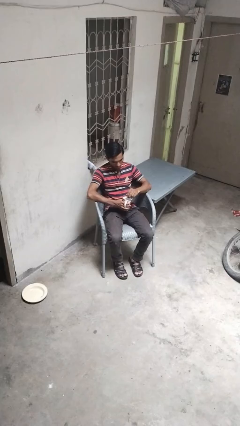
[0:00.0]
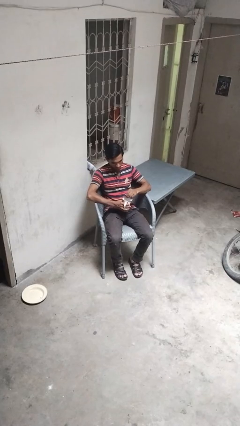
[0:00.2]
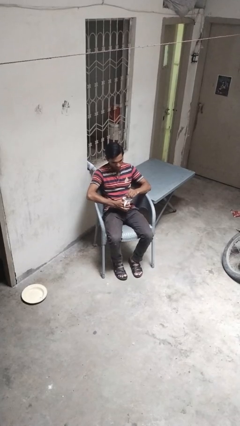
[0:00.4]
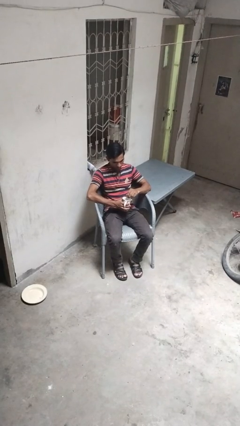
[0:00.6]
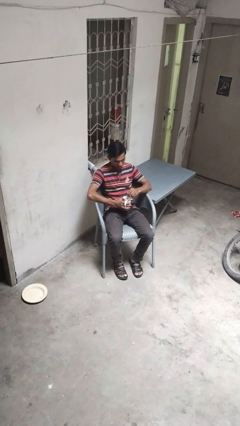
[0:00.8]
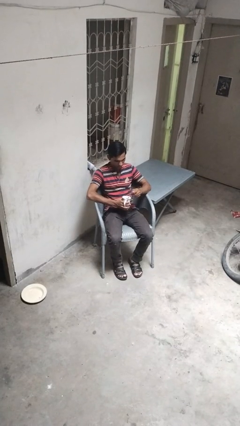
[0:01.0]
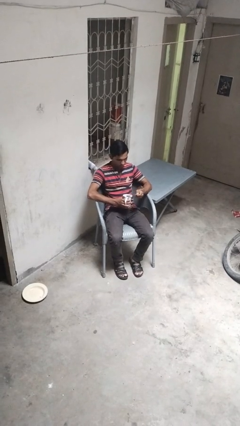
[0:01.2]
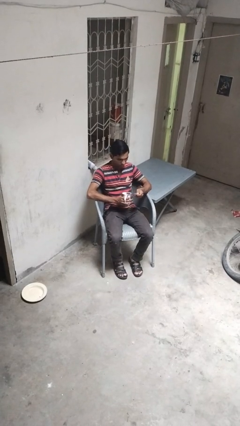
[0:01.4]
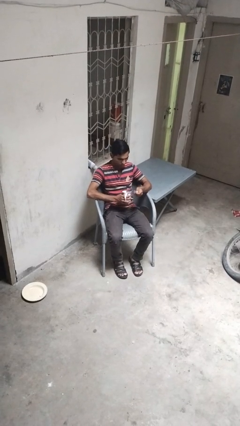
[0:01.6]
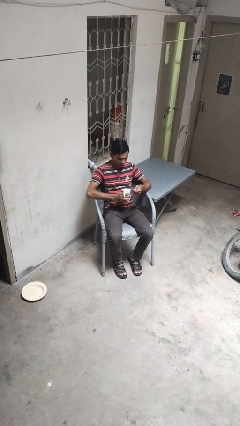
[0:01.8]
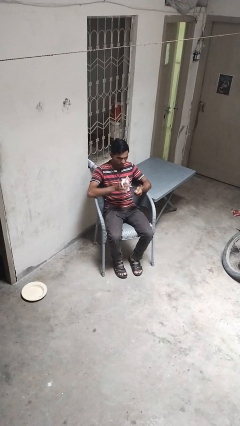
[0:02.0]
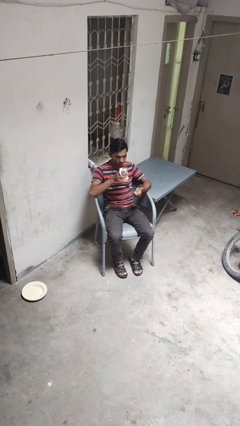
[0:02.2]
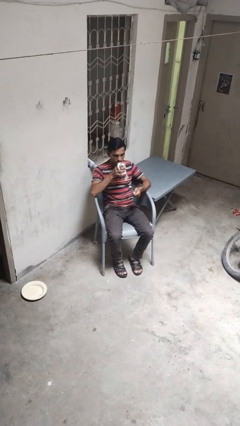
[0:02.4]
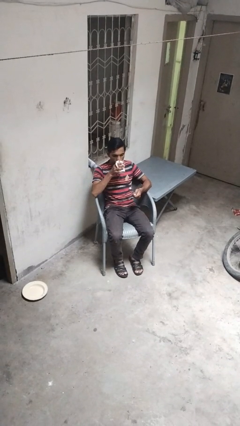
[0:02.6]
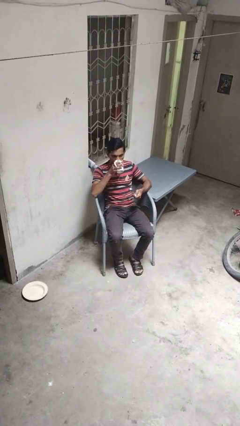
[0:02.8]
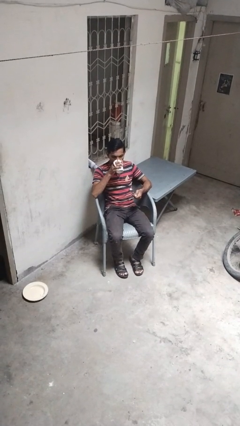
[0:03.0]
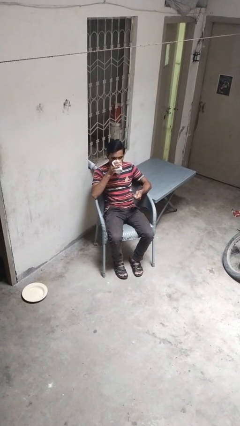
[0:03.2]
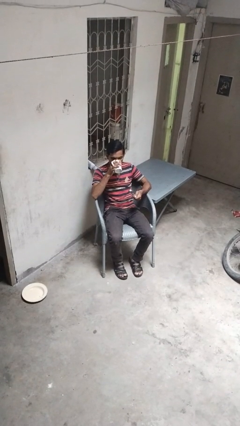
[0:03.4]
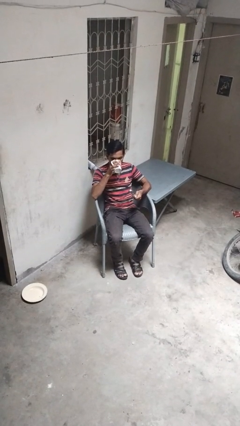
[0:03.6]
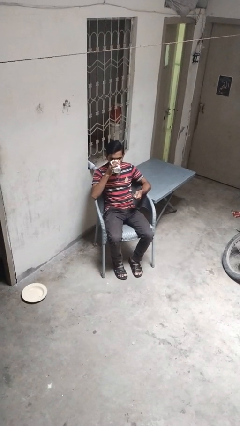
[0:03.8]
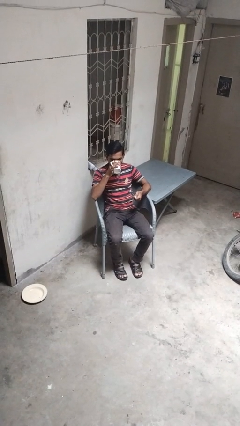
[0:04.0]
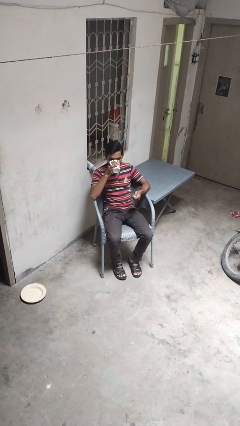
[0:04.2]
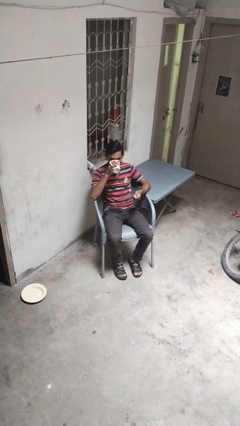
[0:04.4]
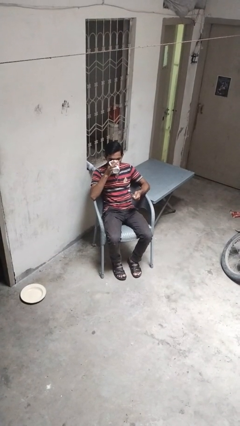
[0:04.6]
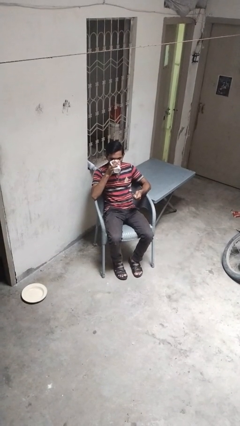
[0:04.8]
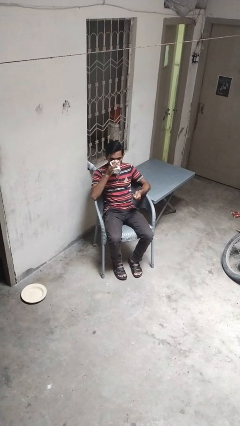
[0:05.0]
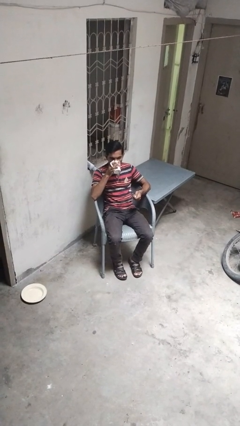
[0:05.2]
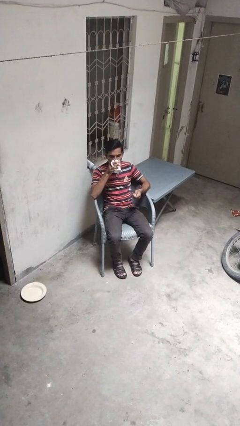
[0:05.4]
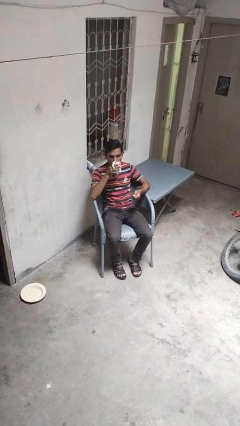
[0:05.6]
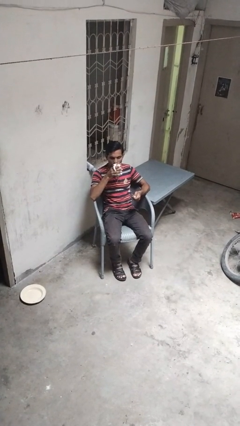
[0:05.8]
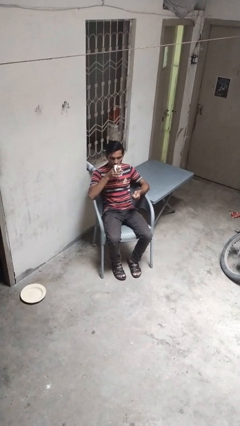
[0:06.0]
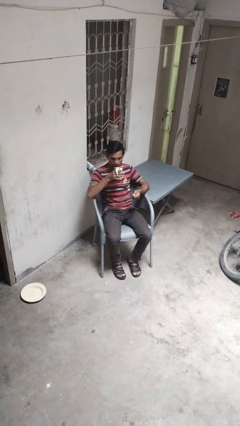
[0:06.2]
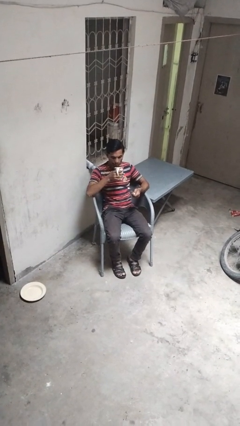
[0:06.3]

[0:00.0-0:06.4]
person drinks from mug

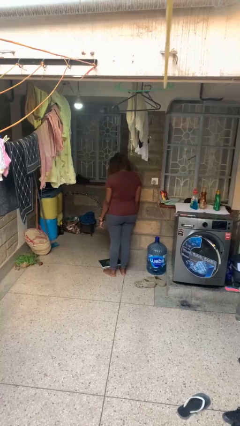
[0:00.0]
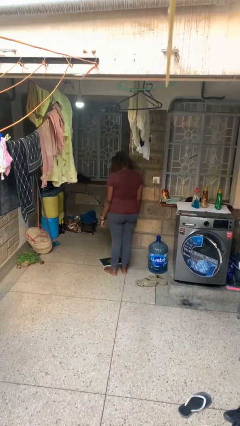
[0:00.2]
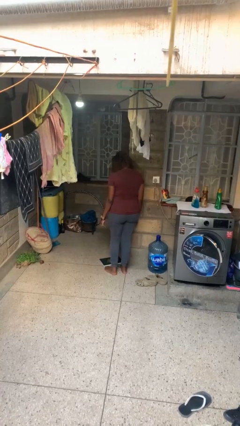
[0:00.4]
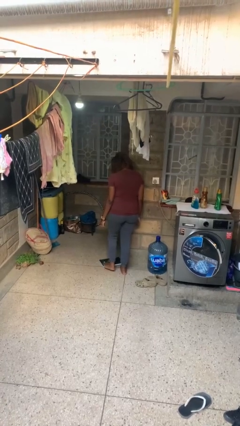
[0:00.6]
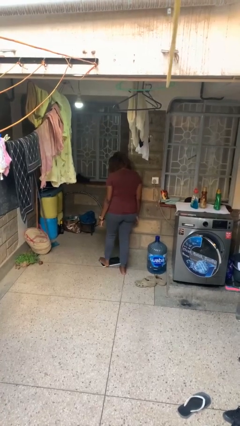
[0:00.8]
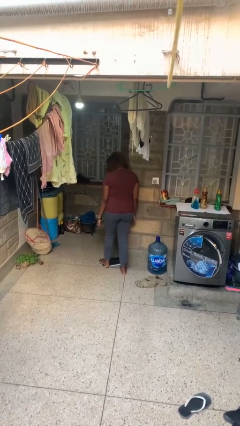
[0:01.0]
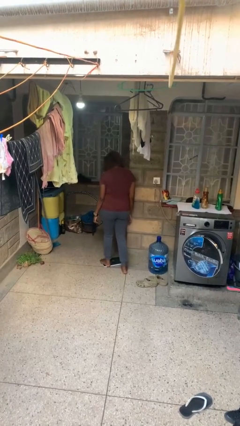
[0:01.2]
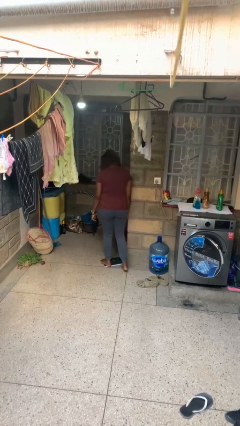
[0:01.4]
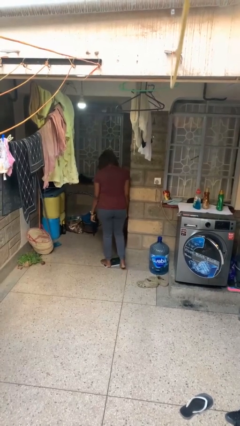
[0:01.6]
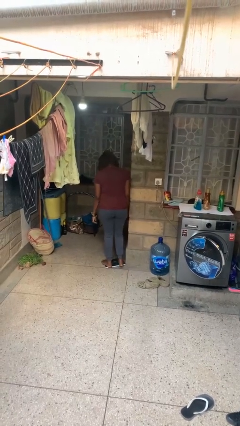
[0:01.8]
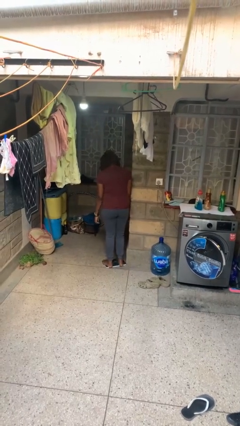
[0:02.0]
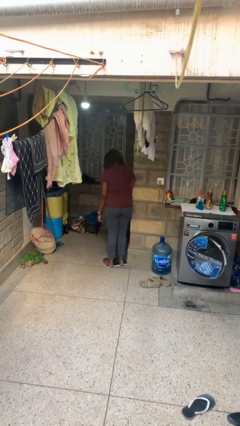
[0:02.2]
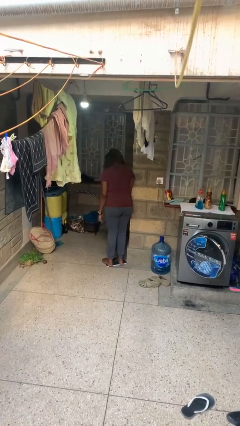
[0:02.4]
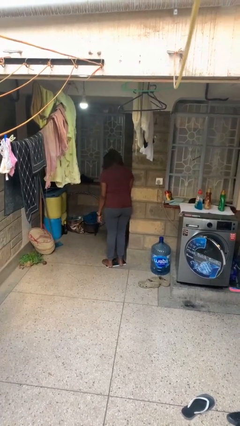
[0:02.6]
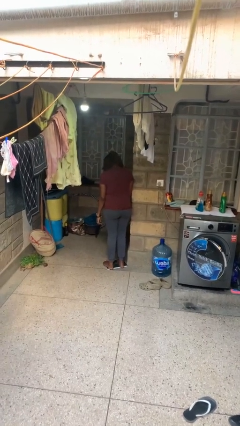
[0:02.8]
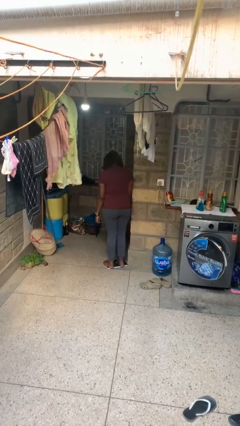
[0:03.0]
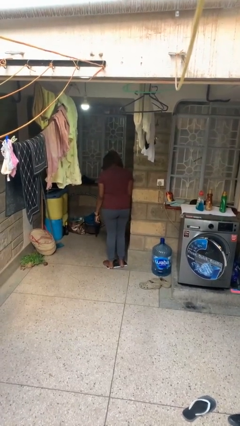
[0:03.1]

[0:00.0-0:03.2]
person uses bodyweight scale

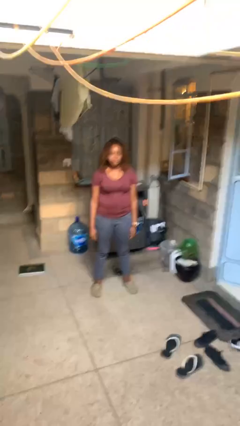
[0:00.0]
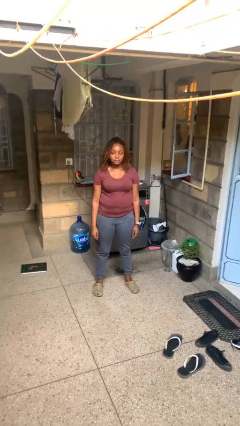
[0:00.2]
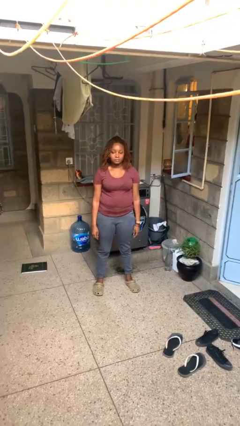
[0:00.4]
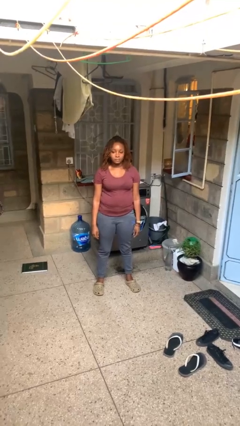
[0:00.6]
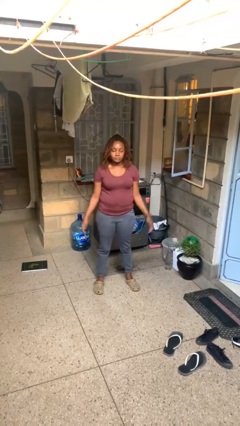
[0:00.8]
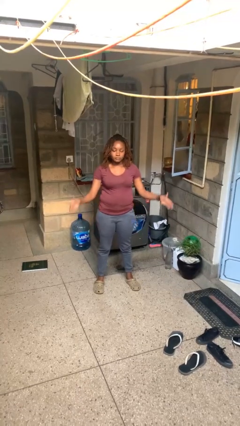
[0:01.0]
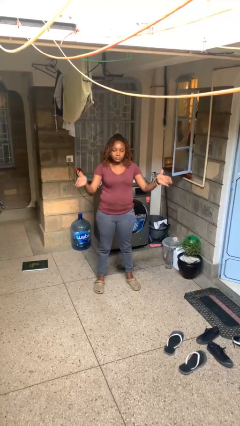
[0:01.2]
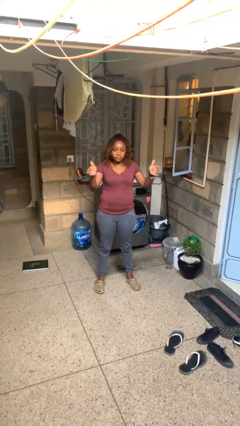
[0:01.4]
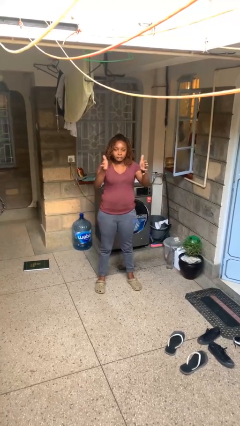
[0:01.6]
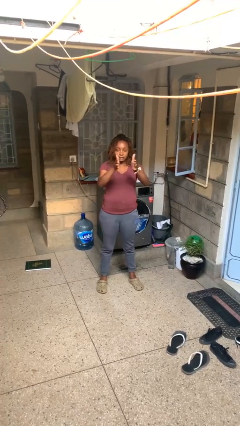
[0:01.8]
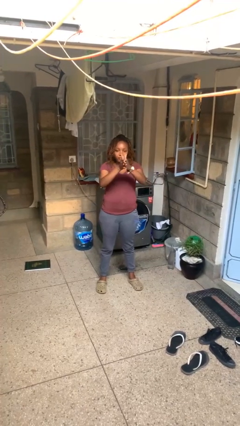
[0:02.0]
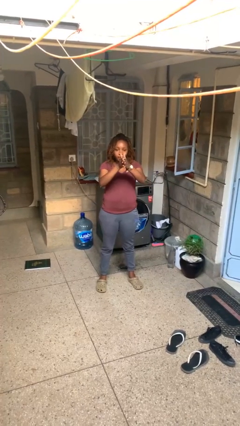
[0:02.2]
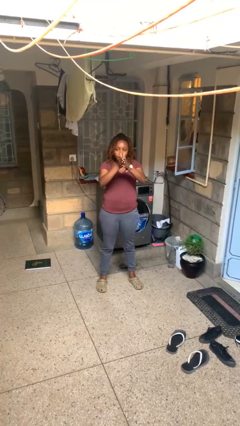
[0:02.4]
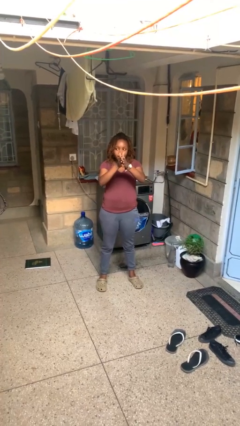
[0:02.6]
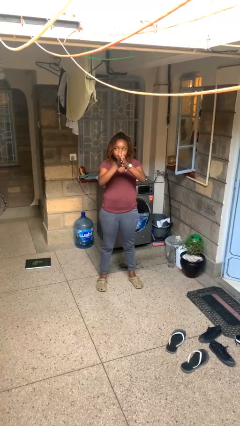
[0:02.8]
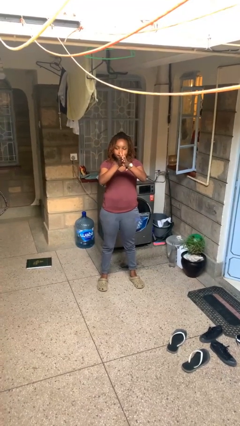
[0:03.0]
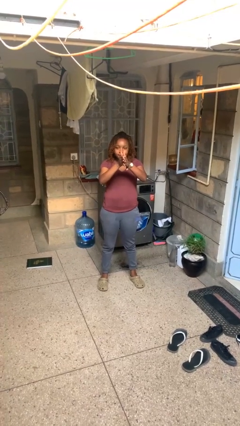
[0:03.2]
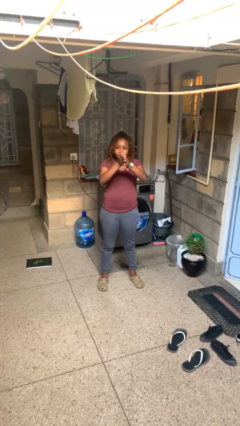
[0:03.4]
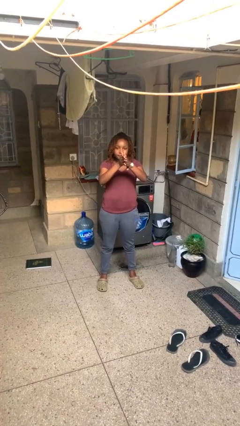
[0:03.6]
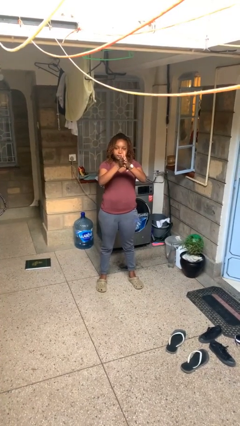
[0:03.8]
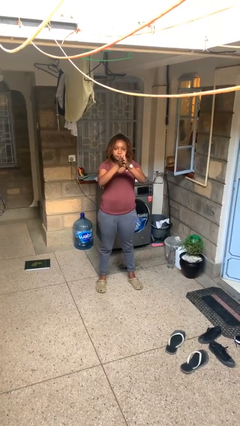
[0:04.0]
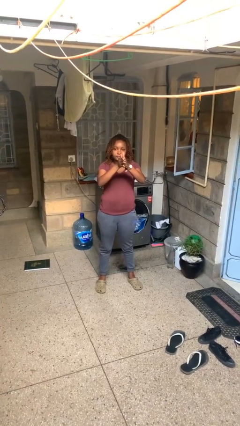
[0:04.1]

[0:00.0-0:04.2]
person gestures zoom in

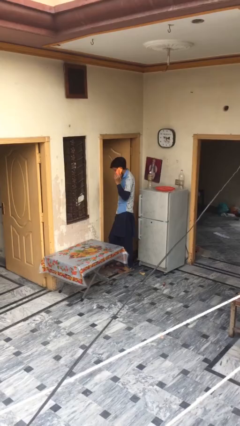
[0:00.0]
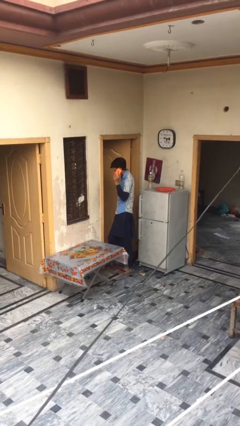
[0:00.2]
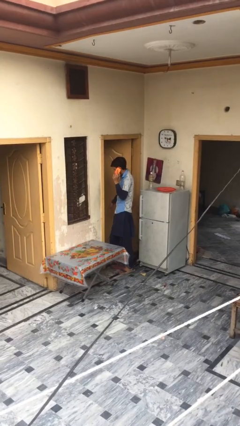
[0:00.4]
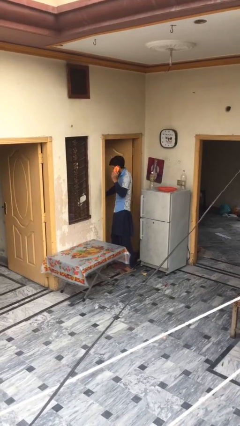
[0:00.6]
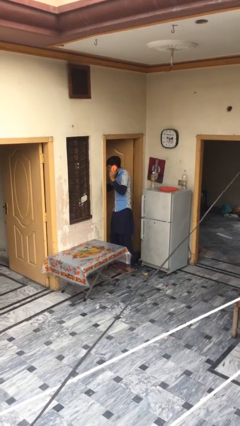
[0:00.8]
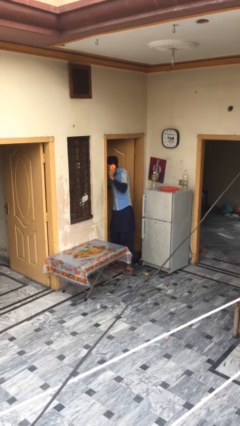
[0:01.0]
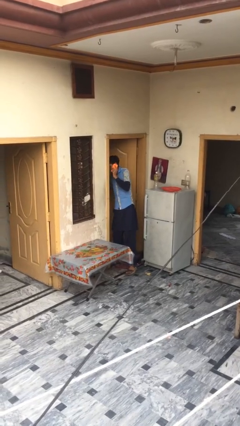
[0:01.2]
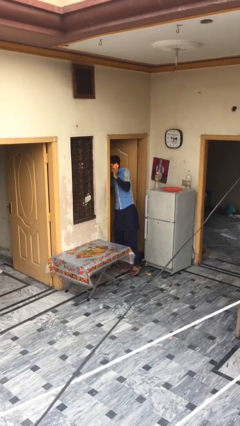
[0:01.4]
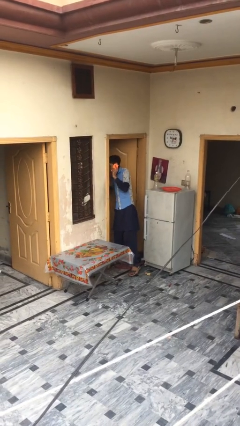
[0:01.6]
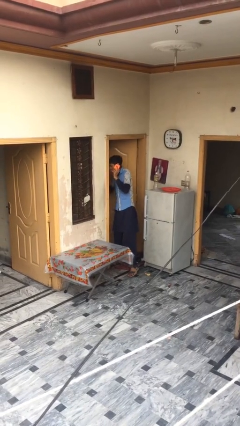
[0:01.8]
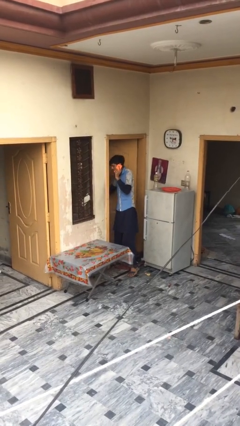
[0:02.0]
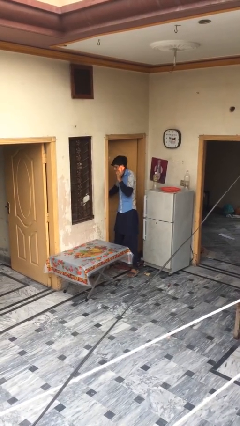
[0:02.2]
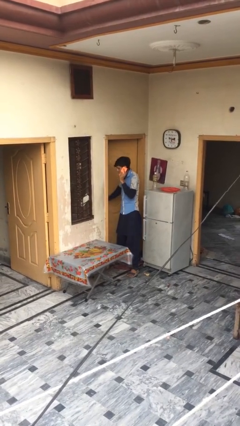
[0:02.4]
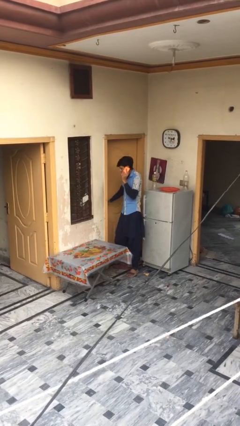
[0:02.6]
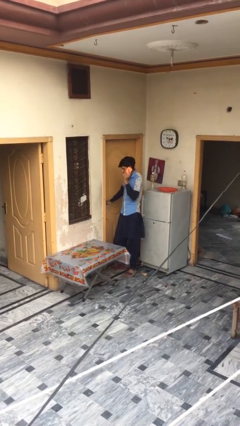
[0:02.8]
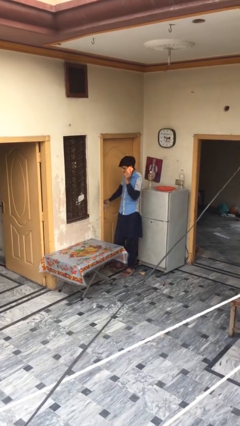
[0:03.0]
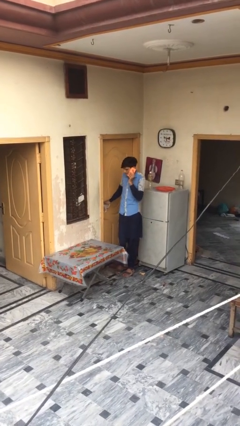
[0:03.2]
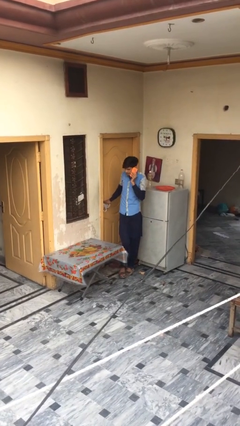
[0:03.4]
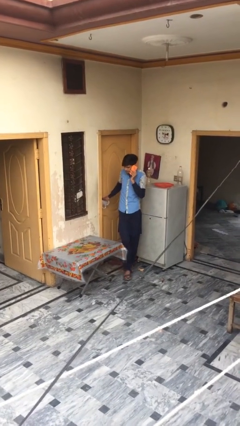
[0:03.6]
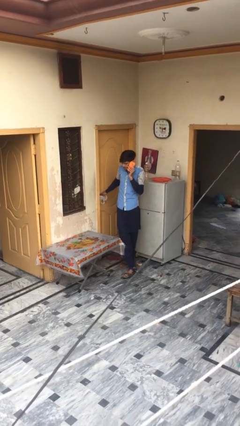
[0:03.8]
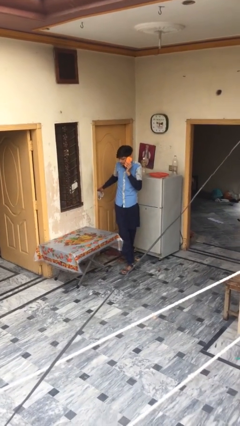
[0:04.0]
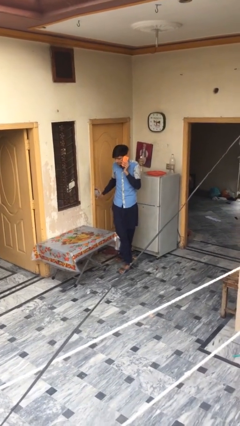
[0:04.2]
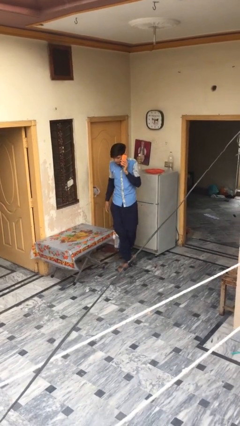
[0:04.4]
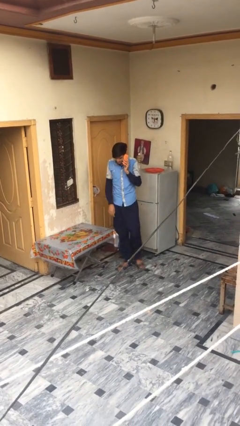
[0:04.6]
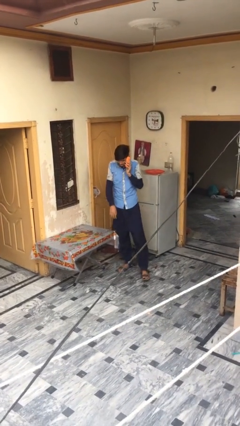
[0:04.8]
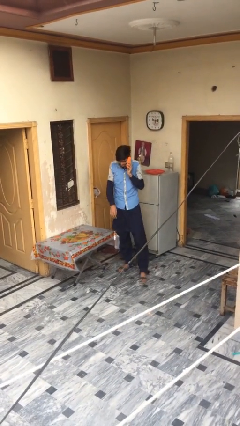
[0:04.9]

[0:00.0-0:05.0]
person closes facility door
